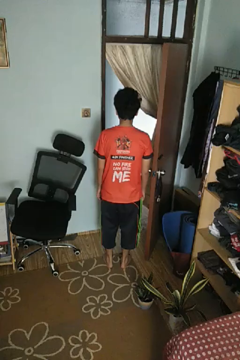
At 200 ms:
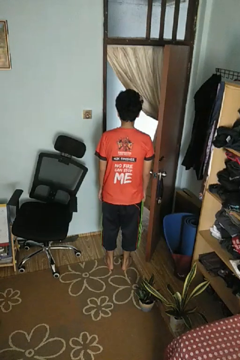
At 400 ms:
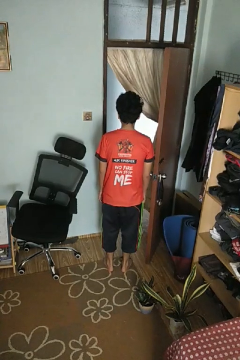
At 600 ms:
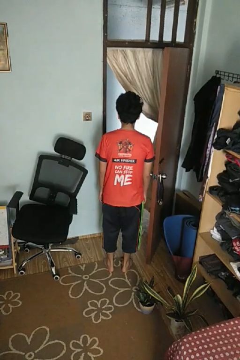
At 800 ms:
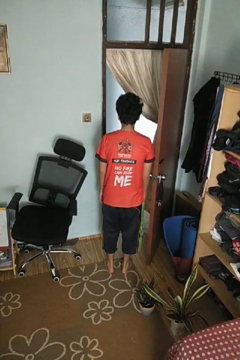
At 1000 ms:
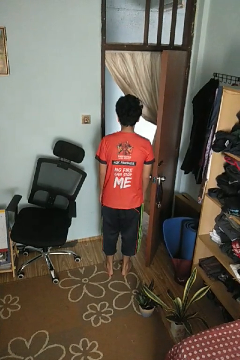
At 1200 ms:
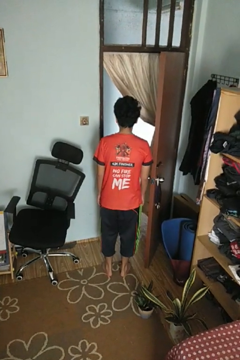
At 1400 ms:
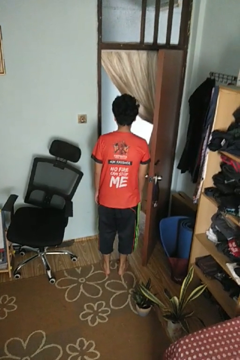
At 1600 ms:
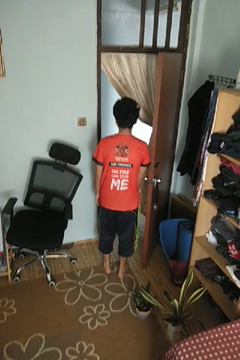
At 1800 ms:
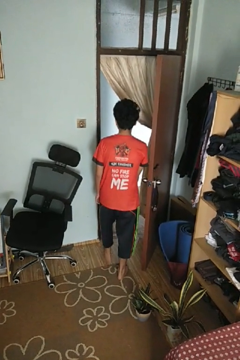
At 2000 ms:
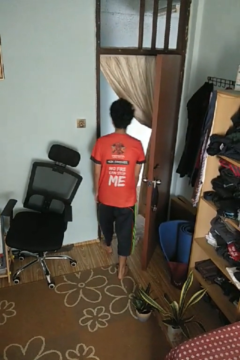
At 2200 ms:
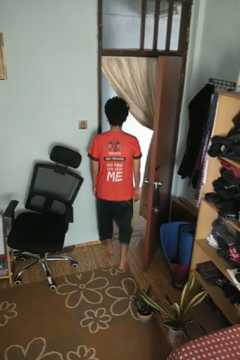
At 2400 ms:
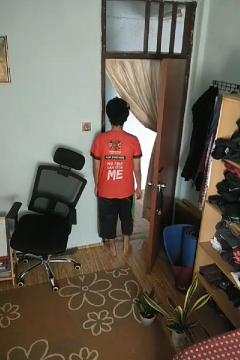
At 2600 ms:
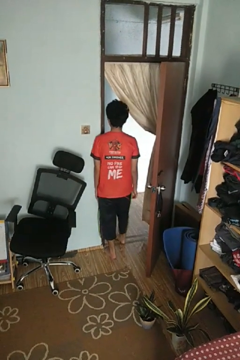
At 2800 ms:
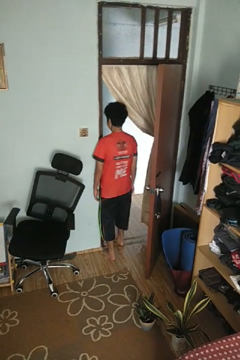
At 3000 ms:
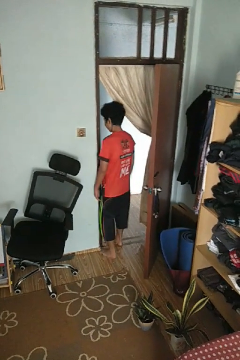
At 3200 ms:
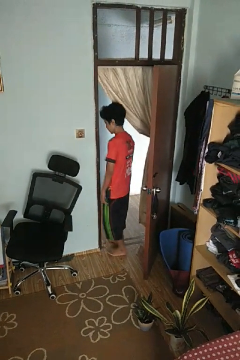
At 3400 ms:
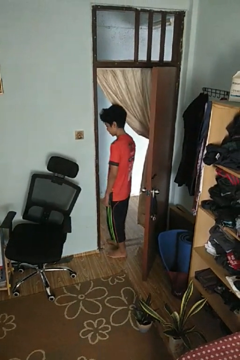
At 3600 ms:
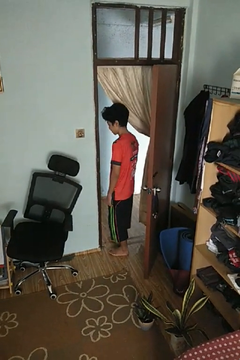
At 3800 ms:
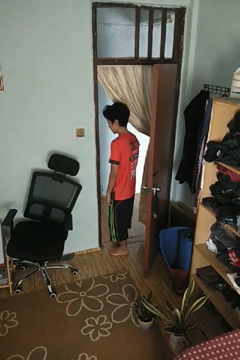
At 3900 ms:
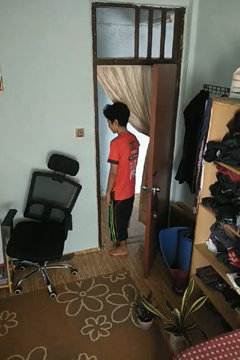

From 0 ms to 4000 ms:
person bumps into wall

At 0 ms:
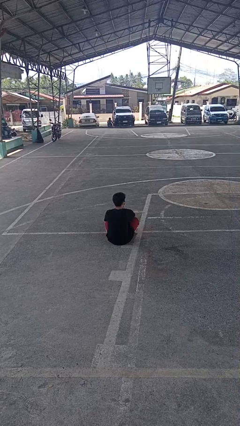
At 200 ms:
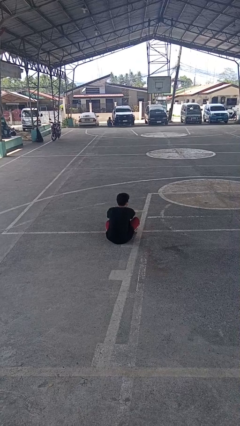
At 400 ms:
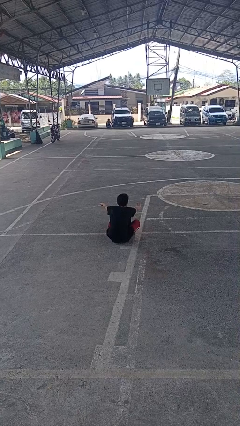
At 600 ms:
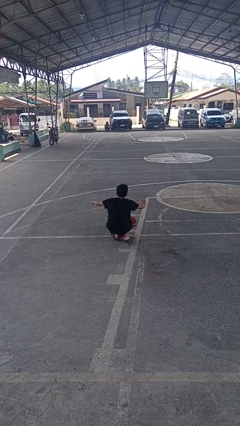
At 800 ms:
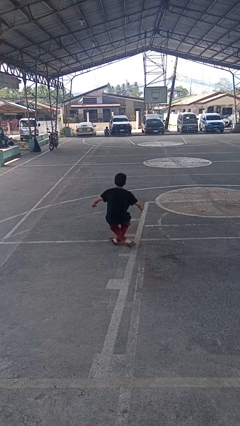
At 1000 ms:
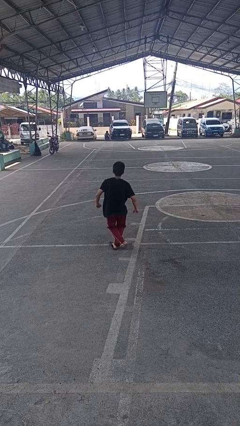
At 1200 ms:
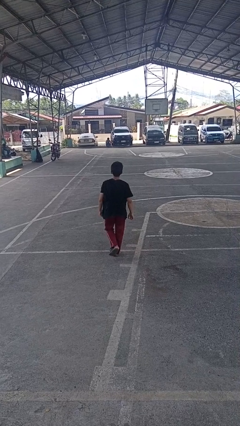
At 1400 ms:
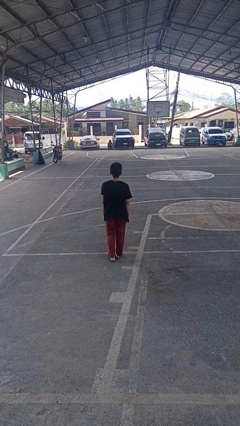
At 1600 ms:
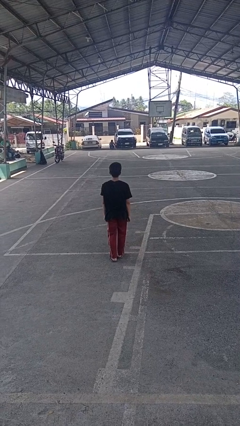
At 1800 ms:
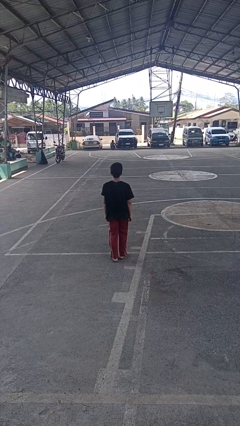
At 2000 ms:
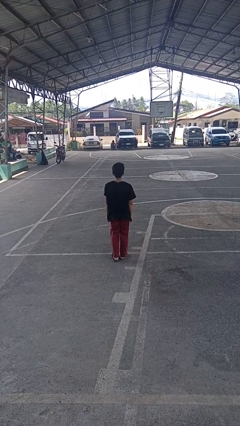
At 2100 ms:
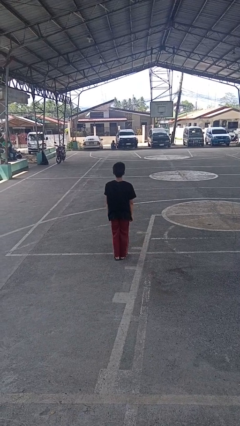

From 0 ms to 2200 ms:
person stands up from floor

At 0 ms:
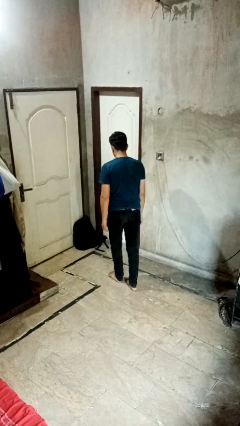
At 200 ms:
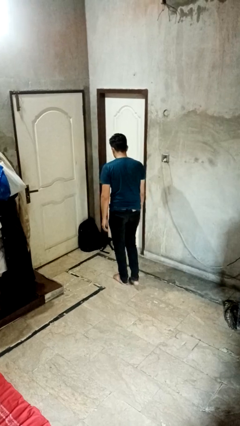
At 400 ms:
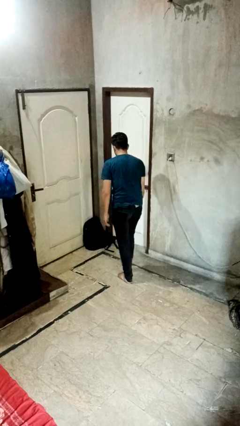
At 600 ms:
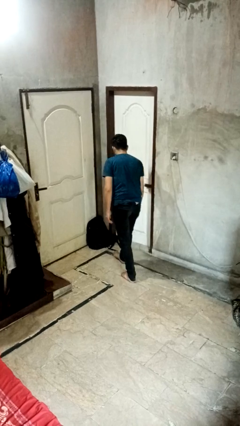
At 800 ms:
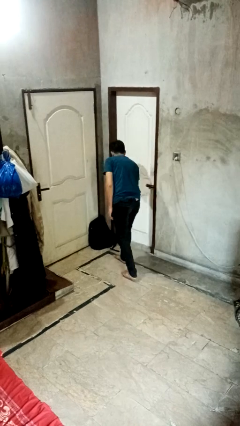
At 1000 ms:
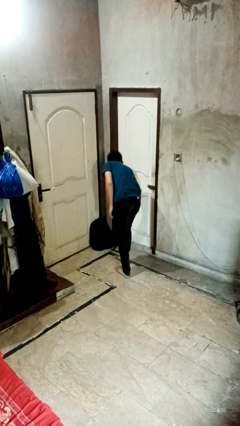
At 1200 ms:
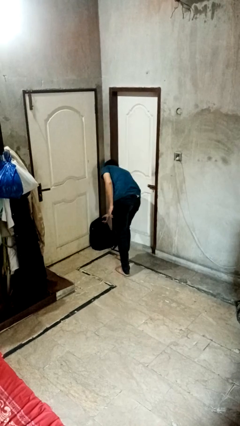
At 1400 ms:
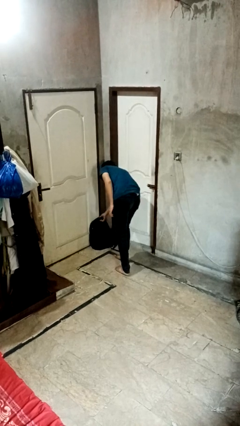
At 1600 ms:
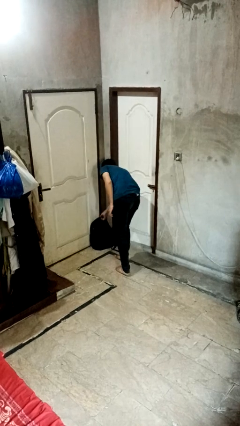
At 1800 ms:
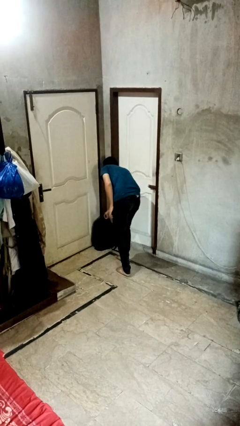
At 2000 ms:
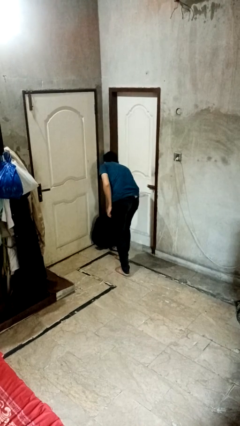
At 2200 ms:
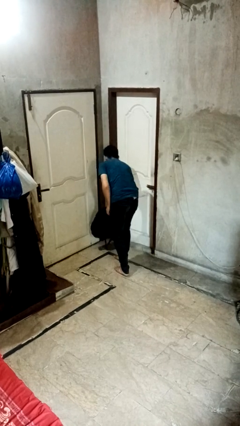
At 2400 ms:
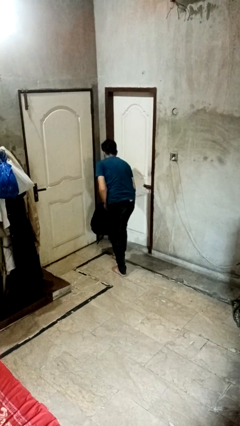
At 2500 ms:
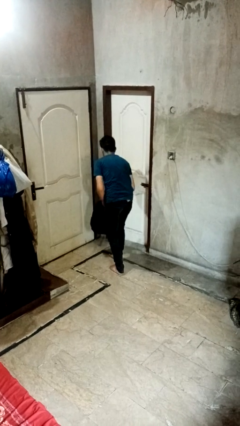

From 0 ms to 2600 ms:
person picks up object from floor

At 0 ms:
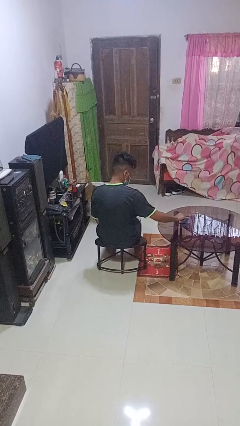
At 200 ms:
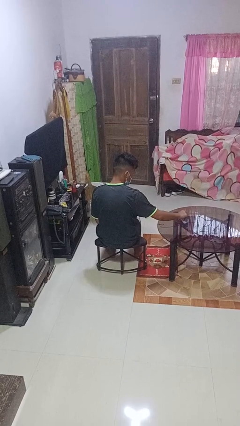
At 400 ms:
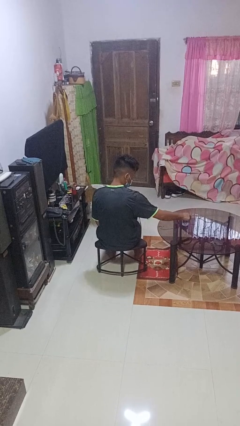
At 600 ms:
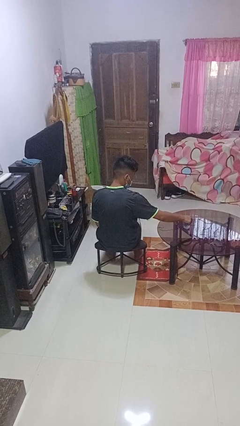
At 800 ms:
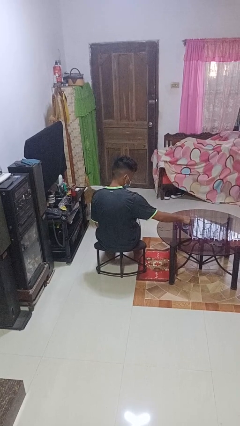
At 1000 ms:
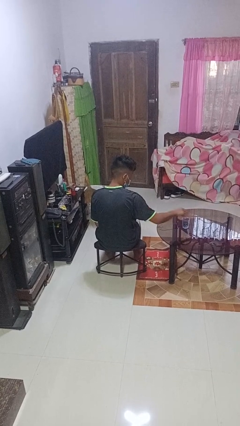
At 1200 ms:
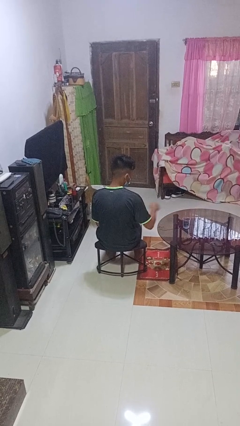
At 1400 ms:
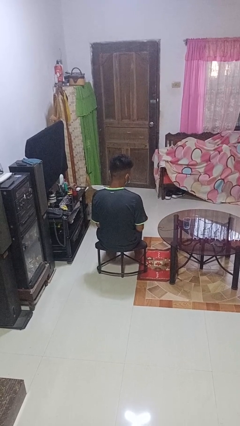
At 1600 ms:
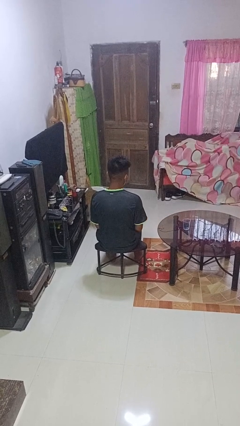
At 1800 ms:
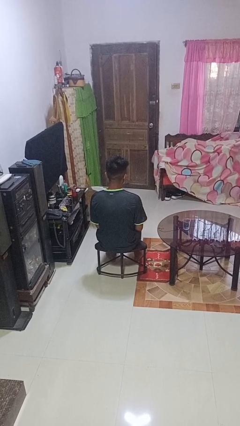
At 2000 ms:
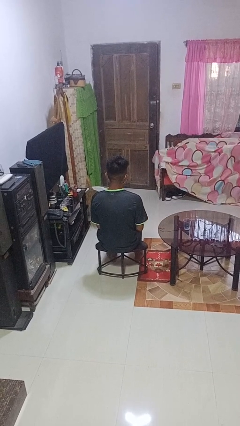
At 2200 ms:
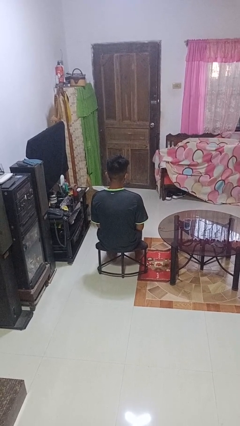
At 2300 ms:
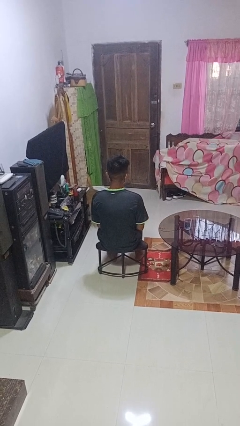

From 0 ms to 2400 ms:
person sets upright glass

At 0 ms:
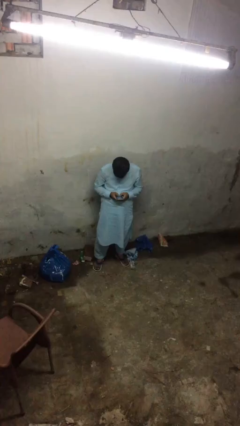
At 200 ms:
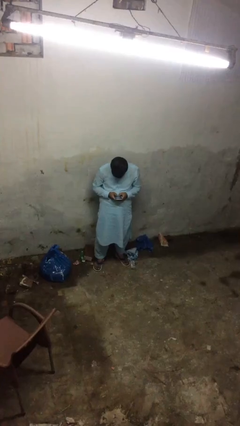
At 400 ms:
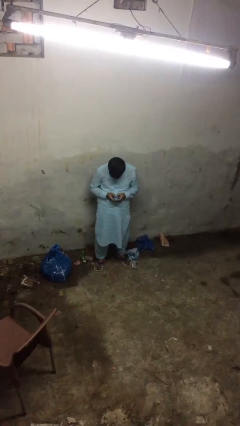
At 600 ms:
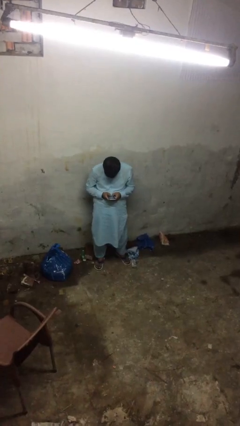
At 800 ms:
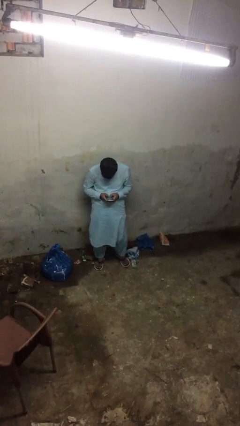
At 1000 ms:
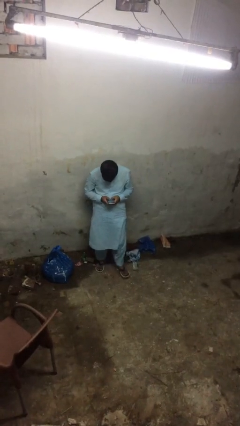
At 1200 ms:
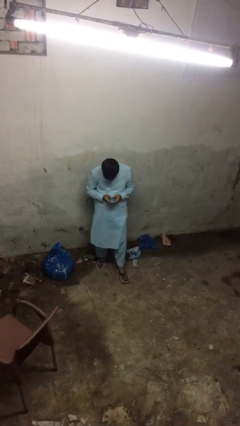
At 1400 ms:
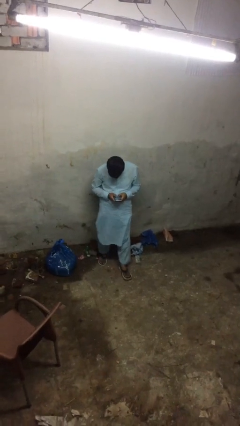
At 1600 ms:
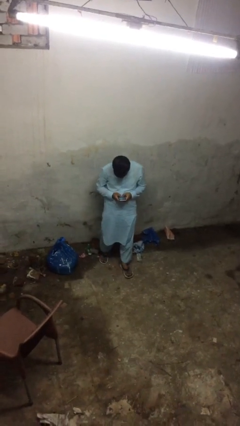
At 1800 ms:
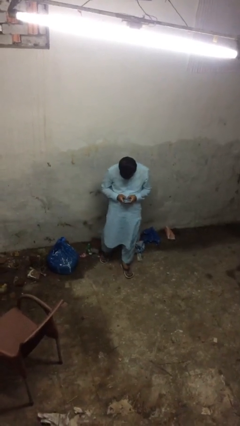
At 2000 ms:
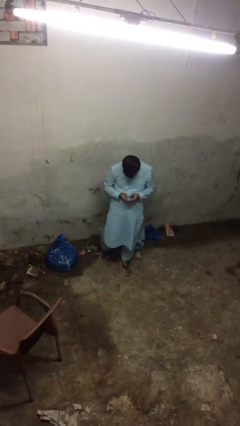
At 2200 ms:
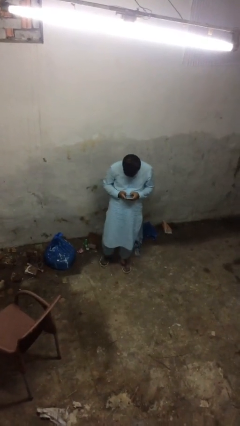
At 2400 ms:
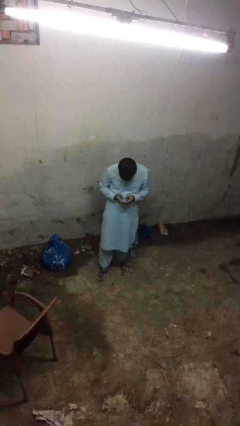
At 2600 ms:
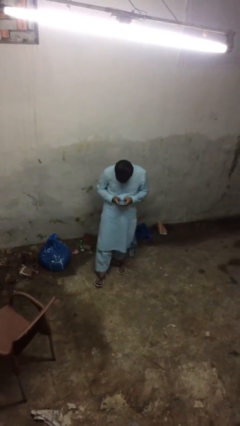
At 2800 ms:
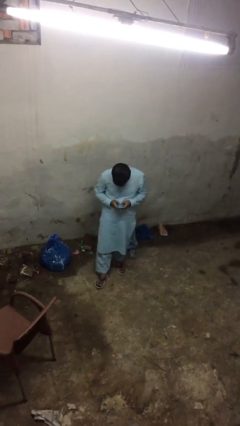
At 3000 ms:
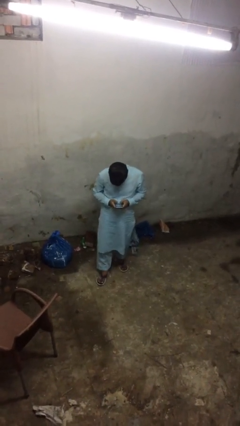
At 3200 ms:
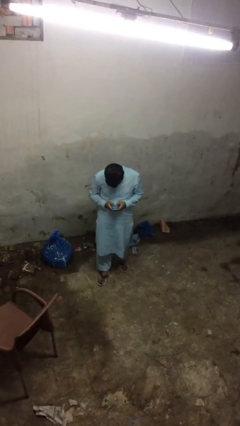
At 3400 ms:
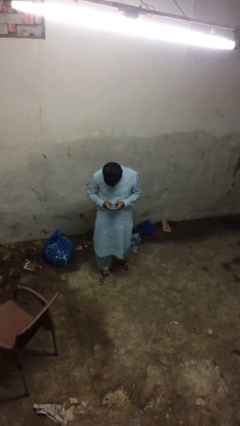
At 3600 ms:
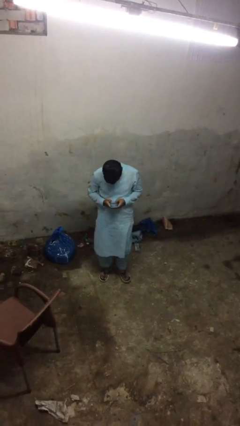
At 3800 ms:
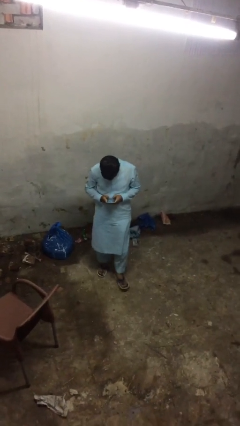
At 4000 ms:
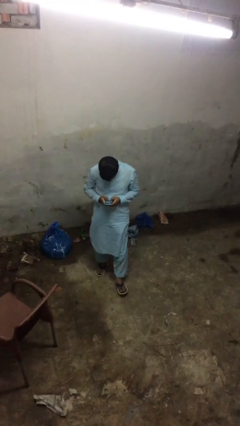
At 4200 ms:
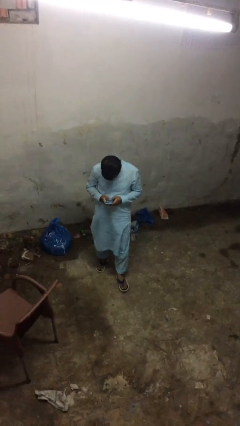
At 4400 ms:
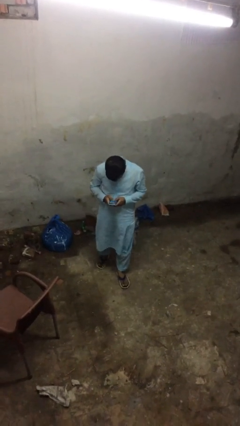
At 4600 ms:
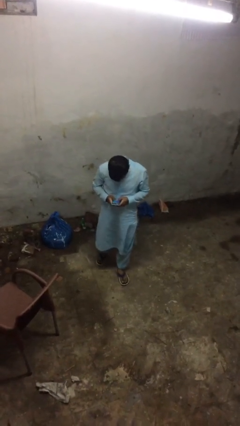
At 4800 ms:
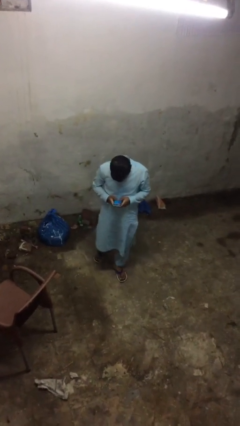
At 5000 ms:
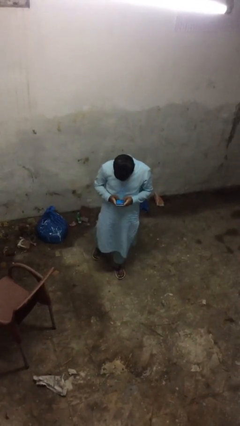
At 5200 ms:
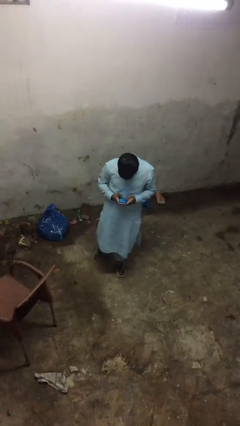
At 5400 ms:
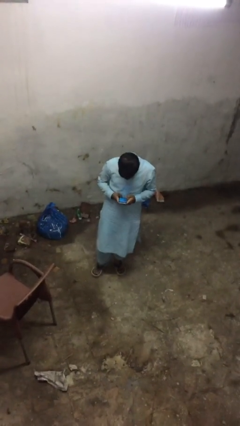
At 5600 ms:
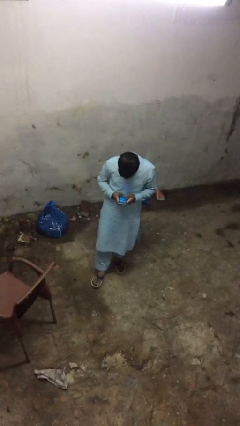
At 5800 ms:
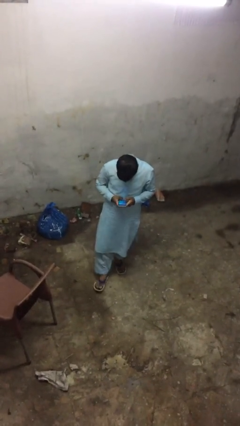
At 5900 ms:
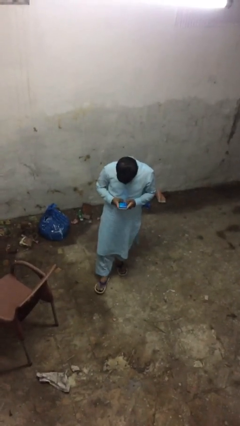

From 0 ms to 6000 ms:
person texts on phone

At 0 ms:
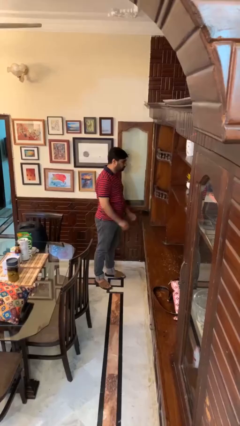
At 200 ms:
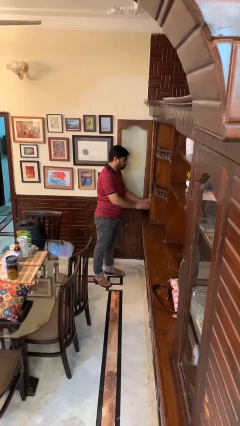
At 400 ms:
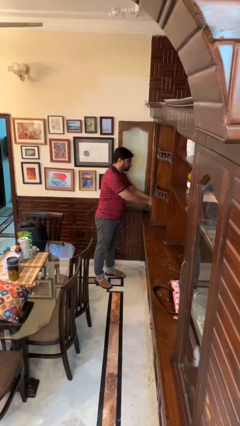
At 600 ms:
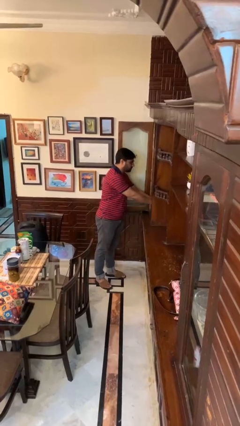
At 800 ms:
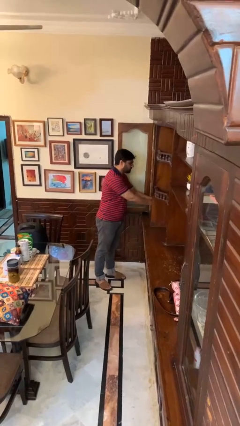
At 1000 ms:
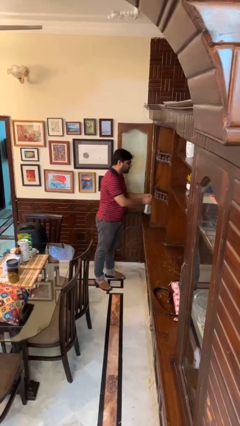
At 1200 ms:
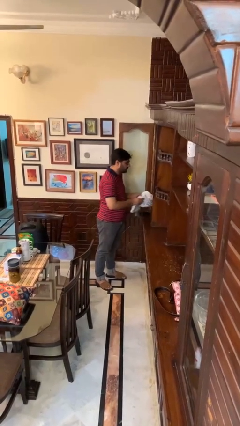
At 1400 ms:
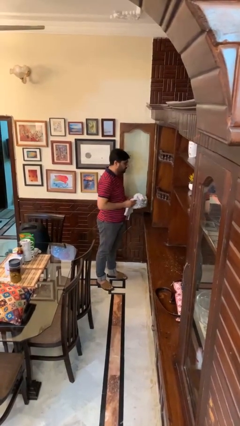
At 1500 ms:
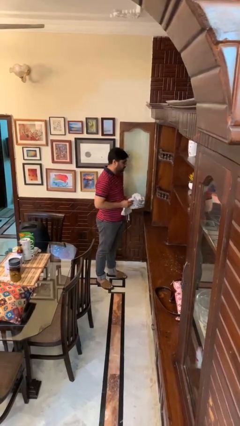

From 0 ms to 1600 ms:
person takes clothes from dresser
